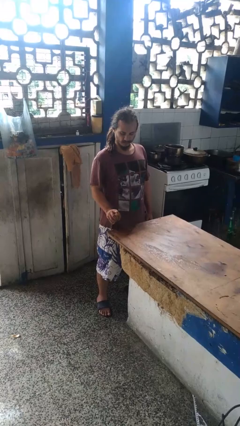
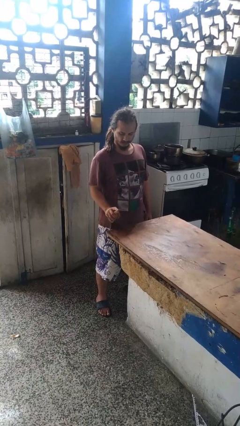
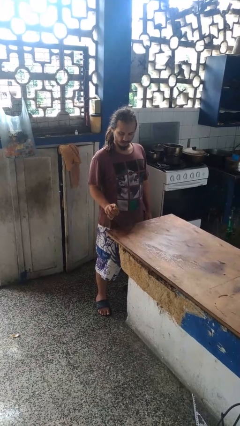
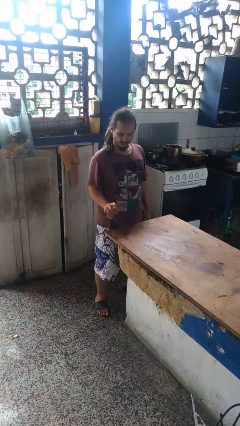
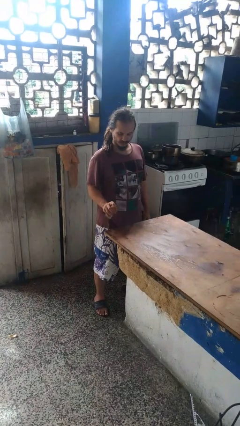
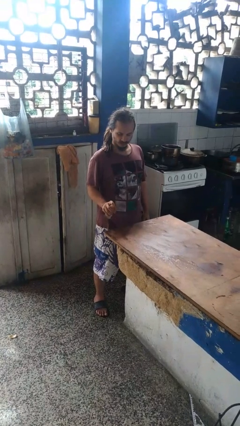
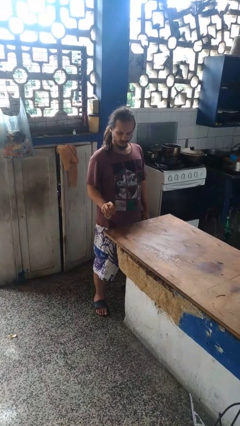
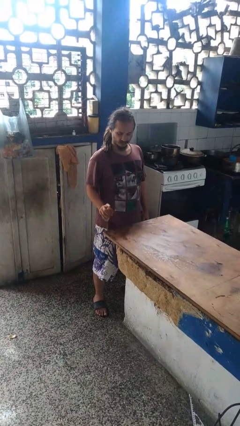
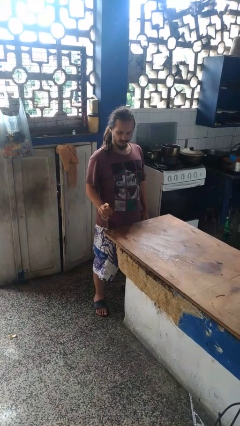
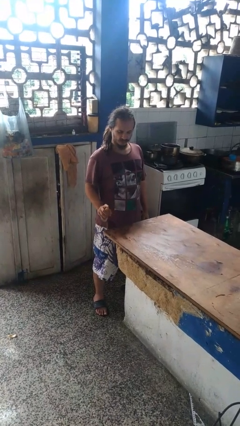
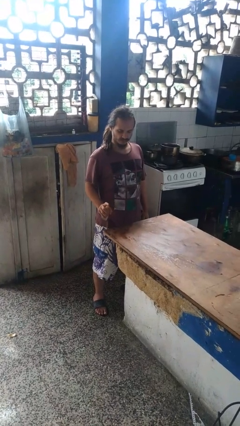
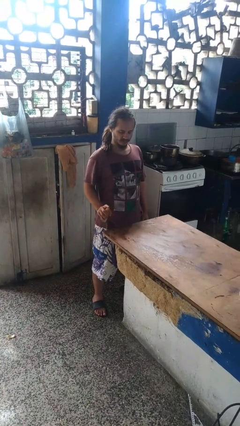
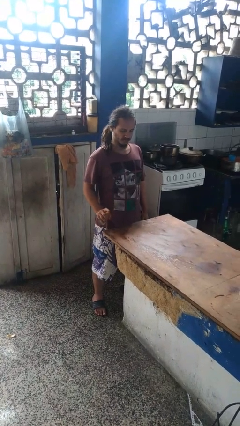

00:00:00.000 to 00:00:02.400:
person sprays from bottle

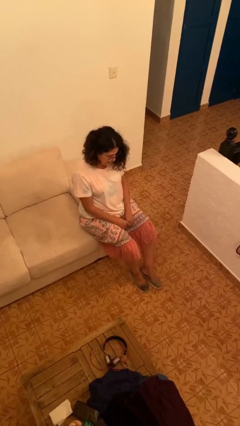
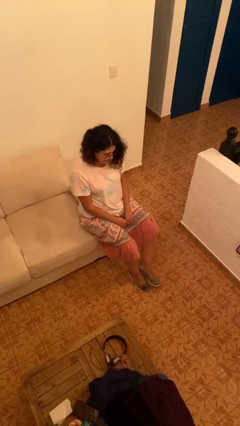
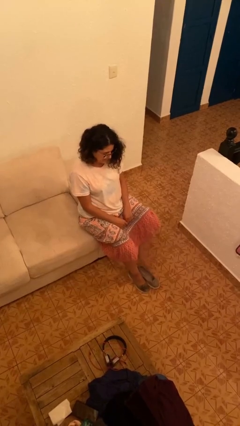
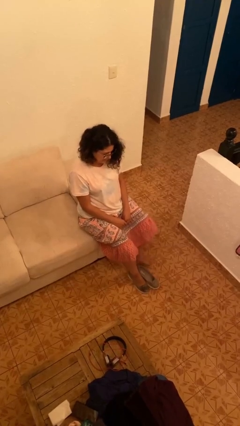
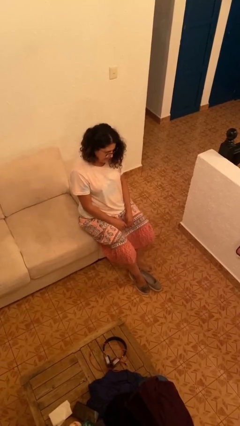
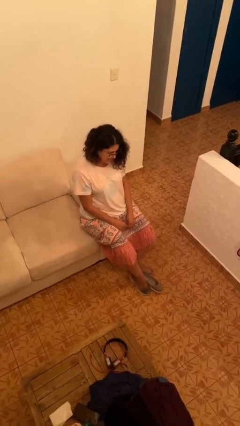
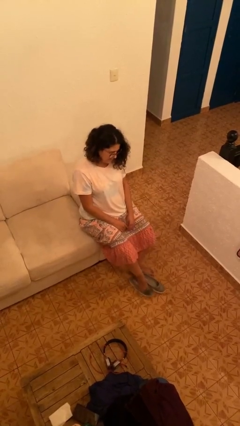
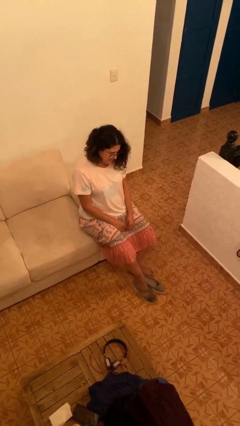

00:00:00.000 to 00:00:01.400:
person takes off shoes

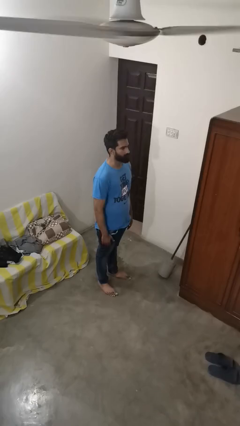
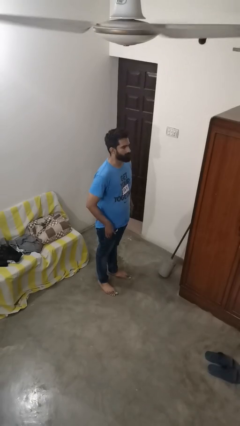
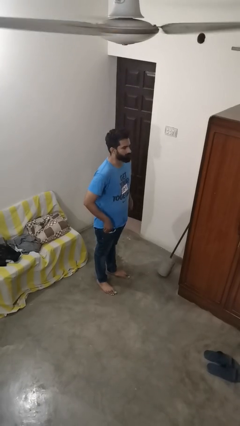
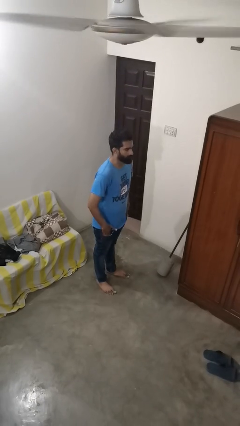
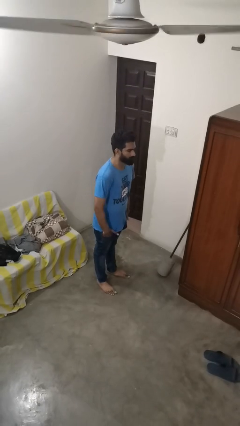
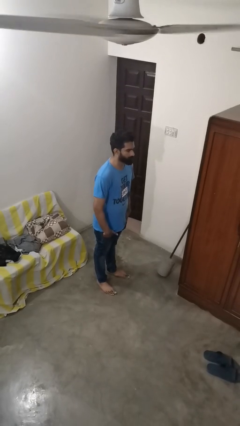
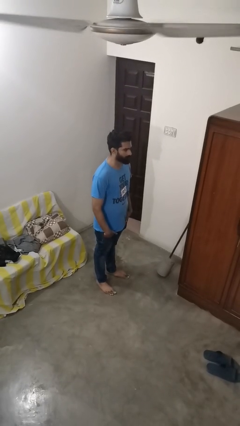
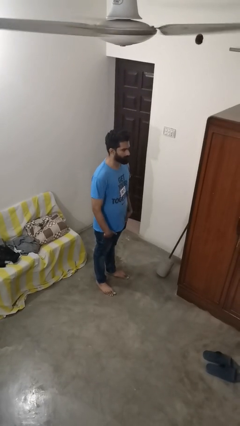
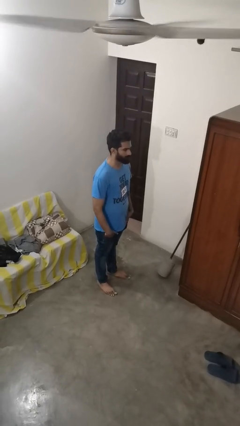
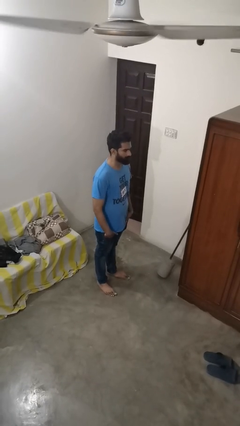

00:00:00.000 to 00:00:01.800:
person puts hands in back pockets

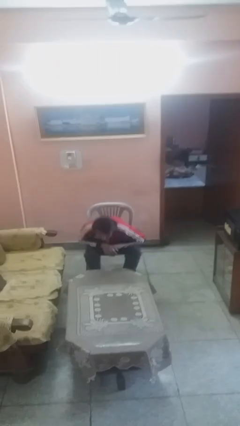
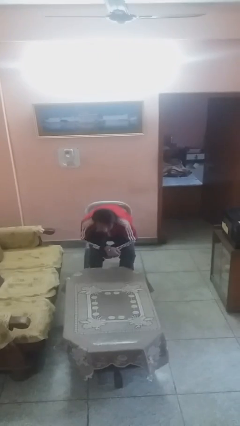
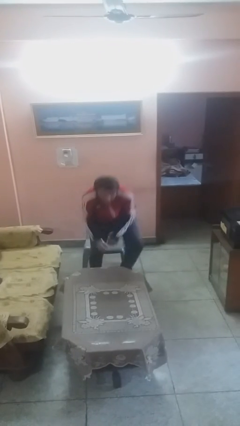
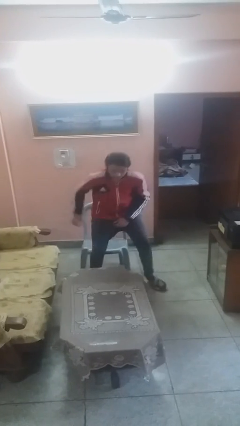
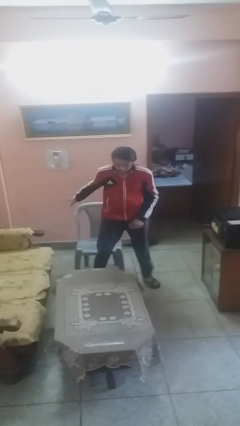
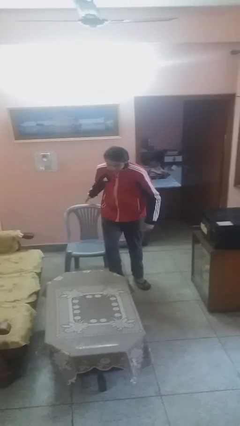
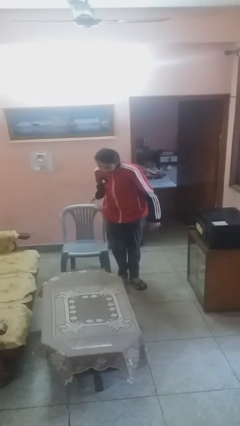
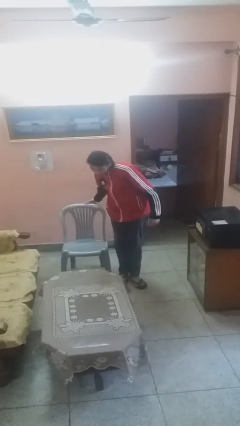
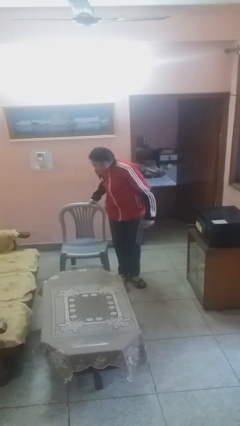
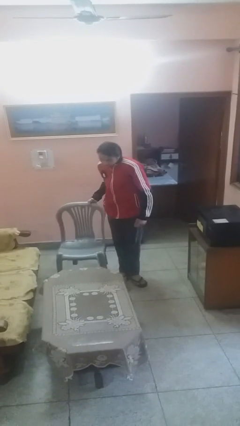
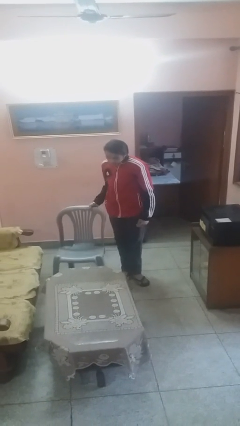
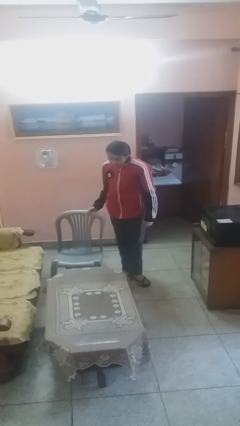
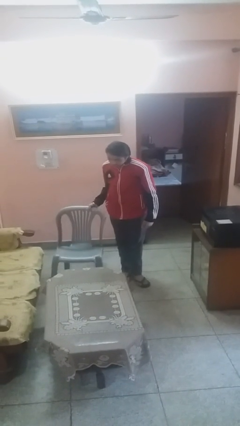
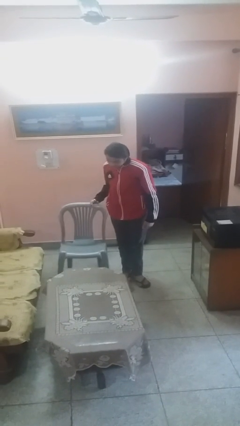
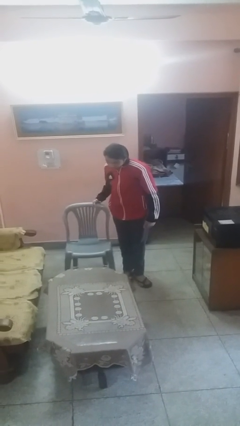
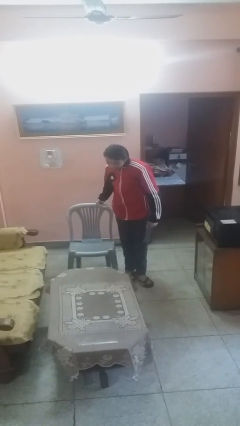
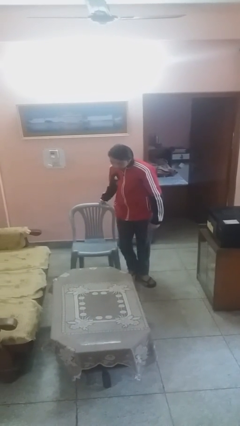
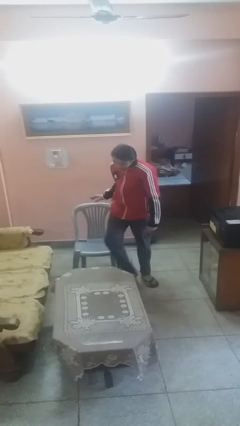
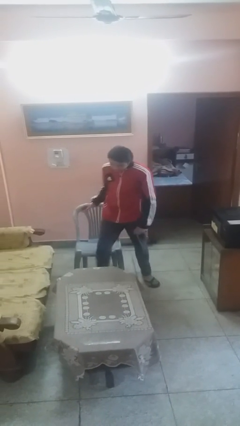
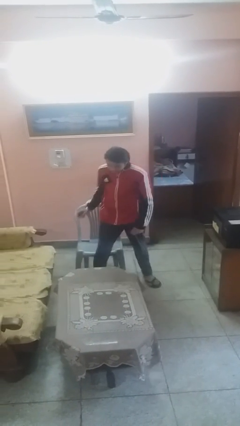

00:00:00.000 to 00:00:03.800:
person stands up

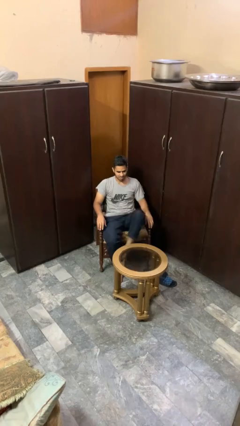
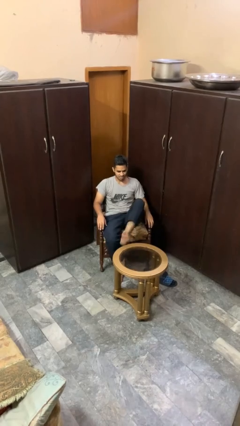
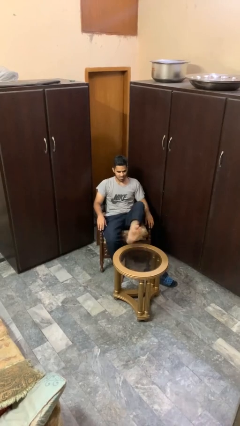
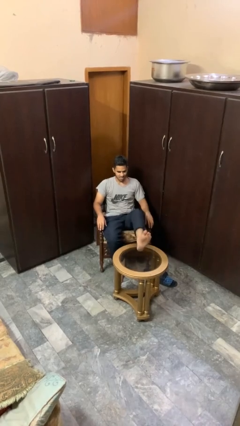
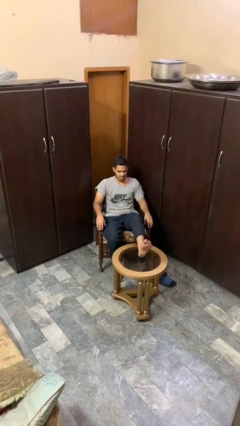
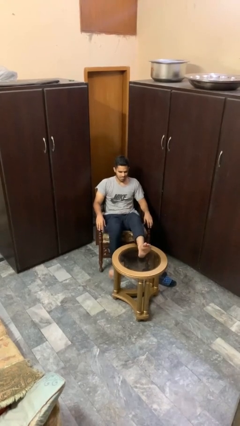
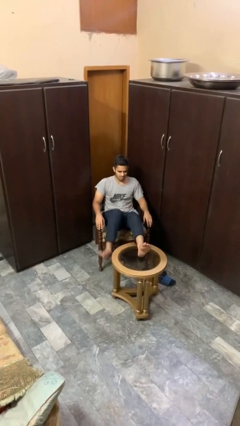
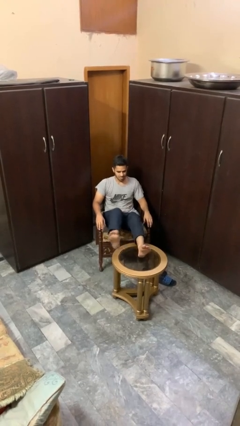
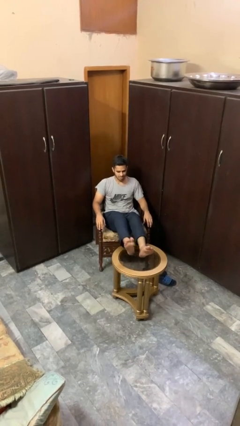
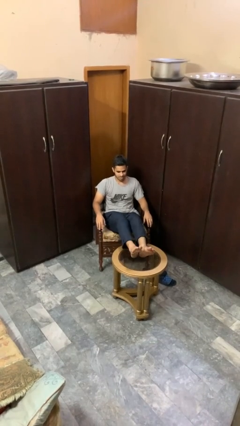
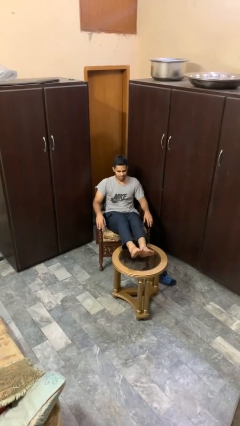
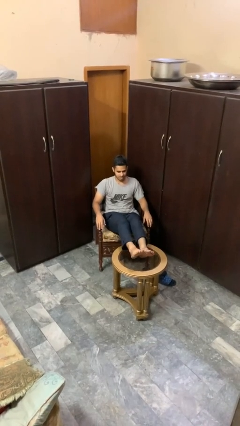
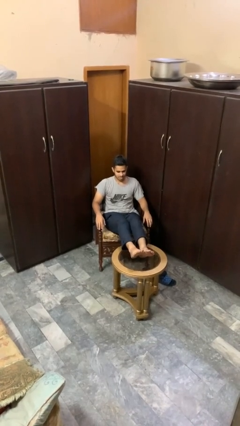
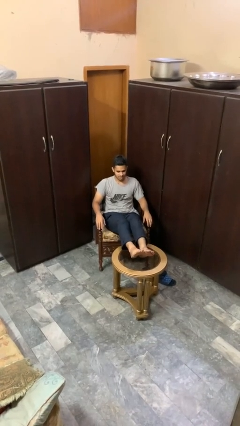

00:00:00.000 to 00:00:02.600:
person puts feet up

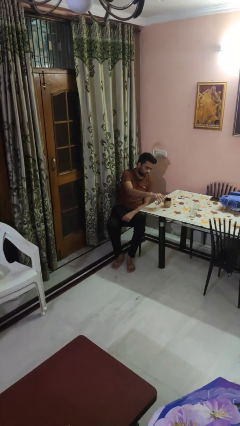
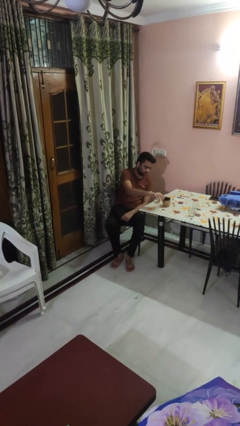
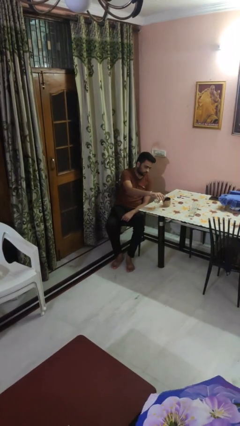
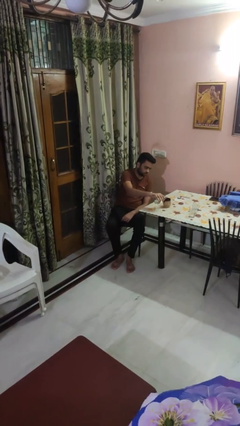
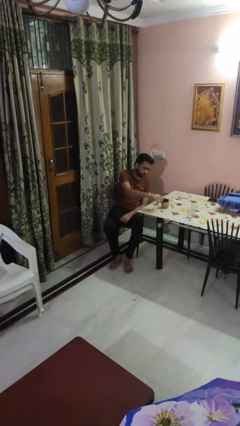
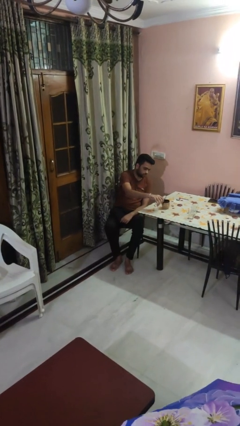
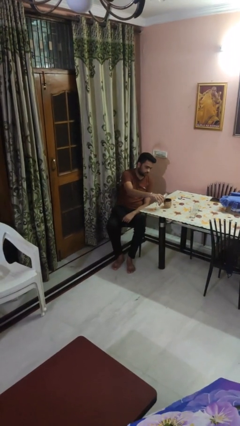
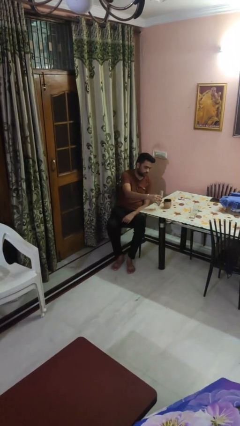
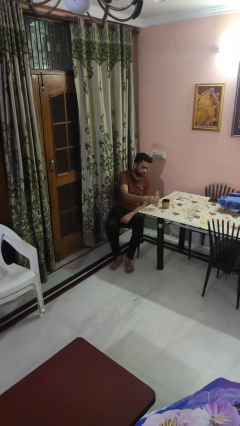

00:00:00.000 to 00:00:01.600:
person pours liquid into cup

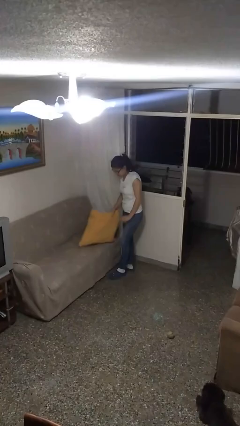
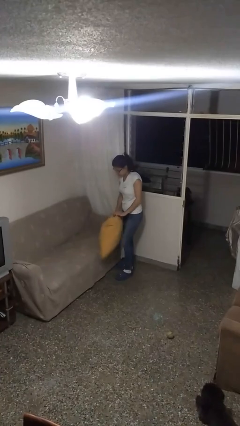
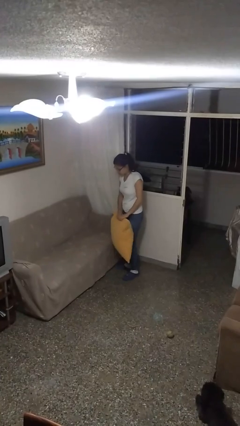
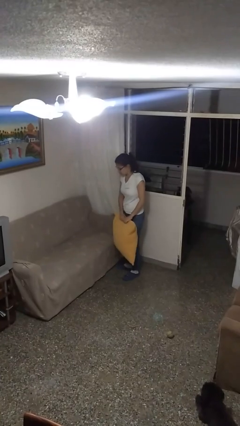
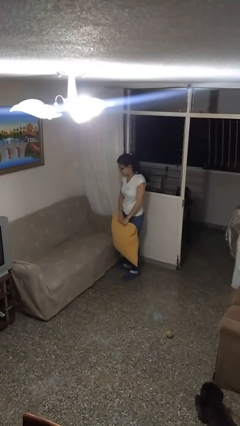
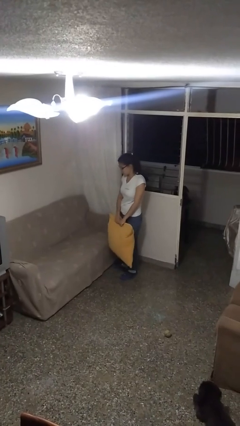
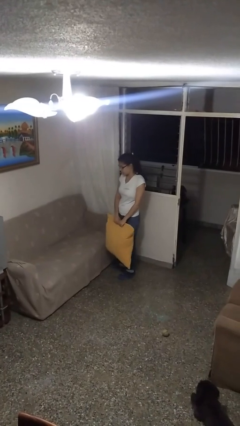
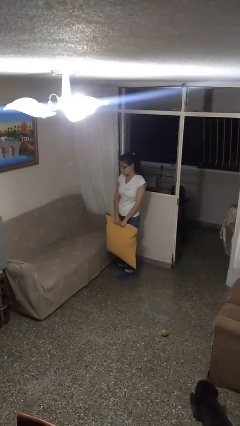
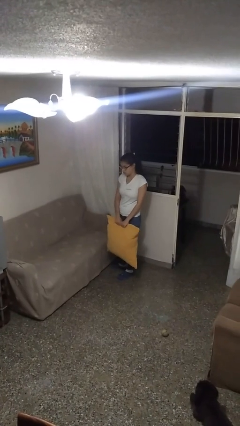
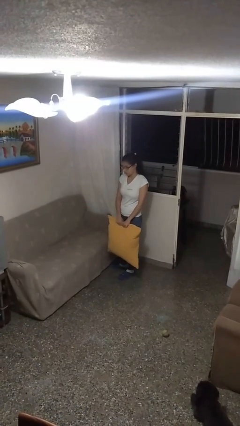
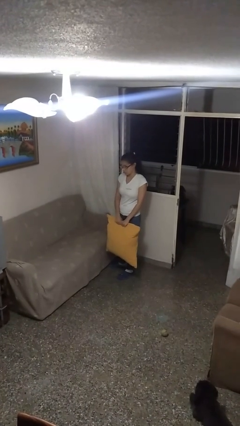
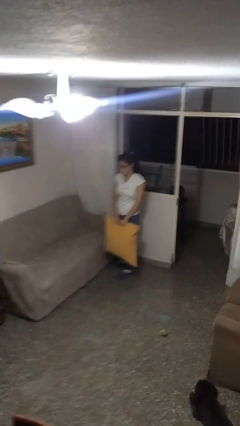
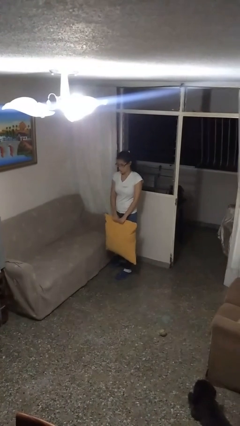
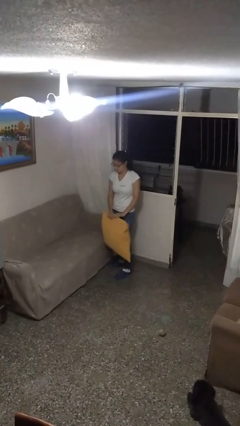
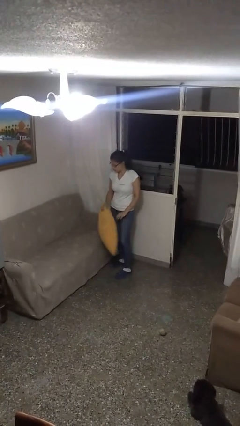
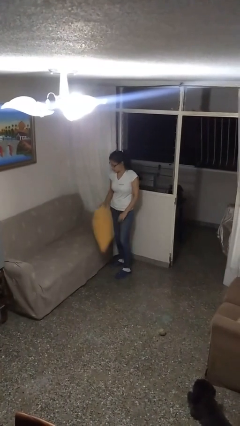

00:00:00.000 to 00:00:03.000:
person picks up object from couch
